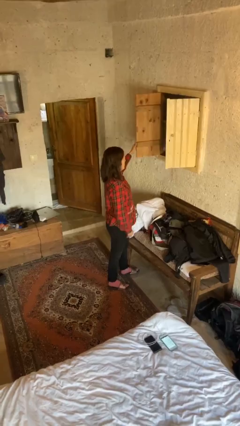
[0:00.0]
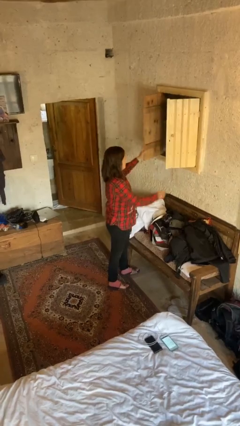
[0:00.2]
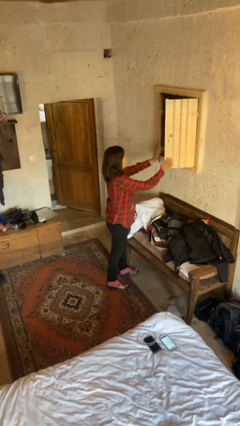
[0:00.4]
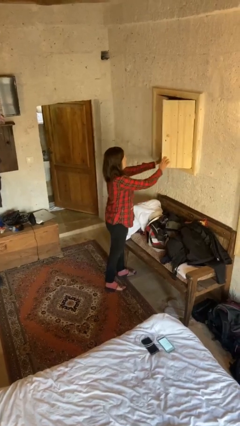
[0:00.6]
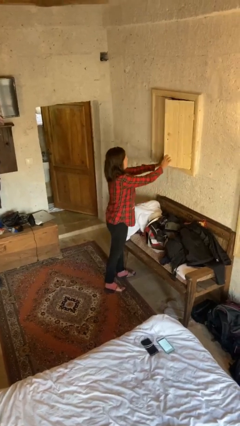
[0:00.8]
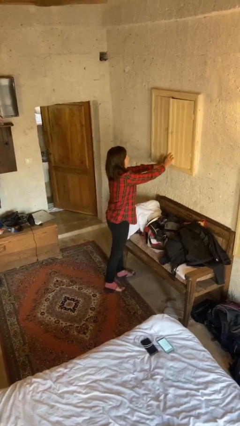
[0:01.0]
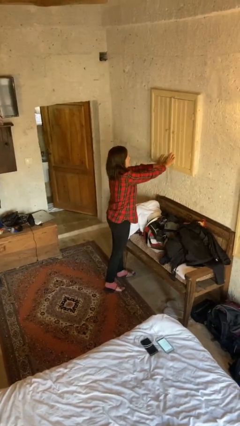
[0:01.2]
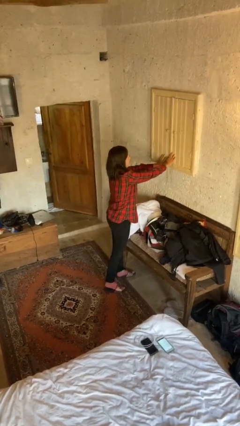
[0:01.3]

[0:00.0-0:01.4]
person closes closet door

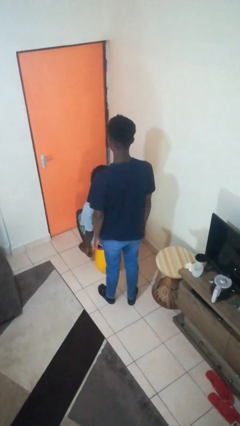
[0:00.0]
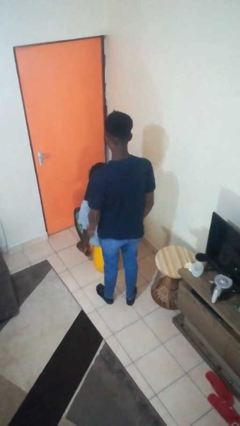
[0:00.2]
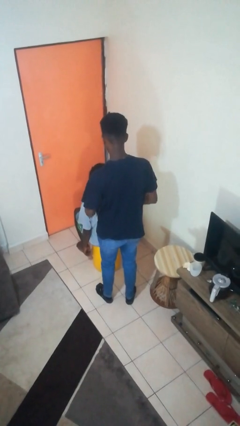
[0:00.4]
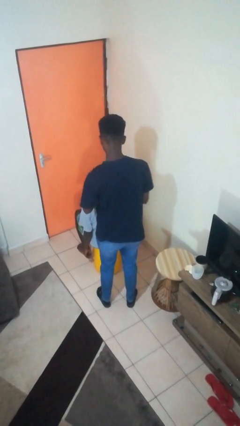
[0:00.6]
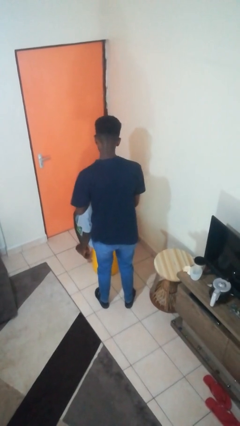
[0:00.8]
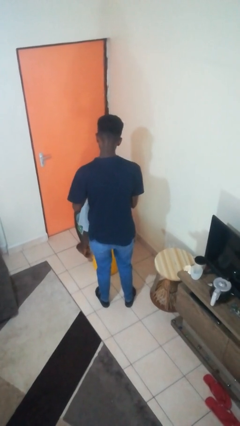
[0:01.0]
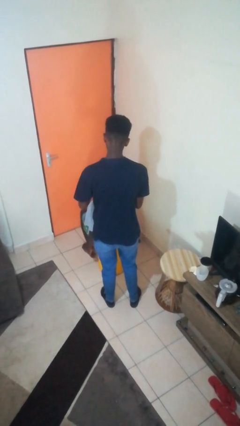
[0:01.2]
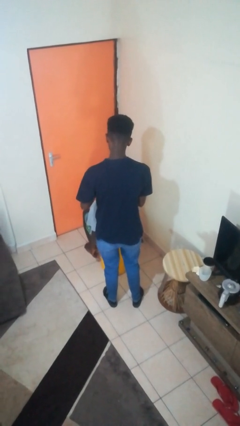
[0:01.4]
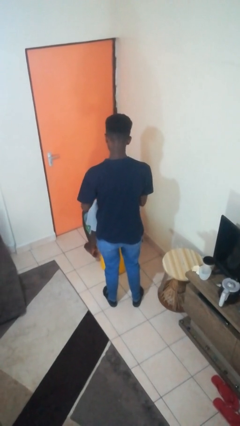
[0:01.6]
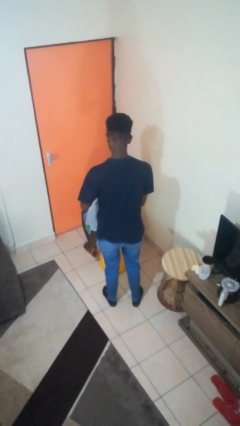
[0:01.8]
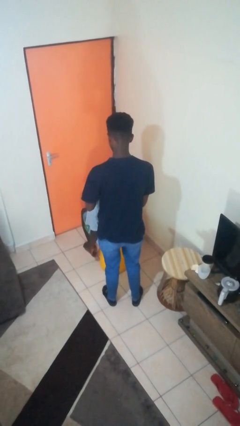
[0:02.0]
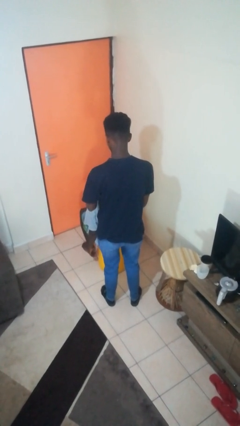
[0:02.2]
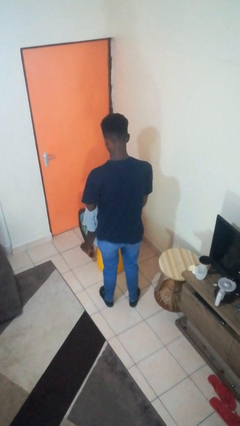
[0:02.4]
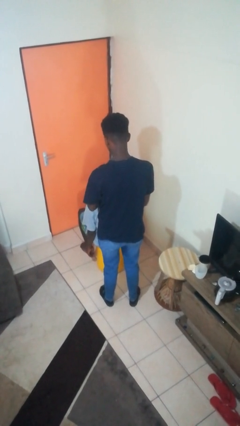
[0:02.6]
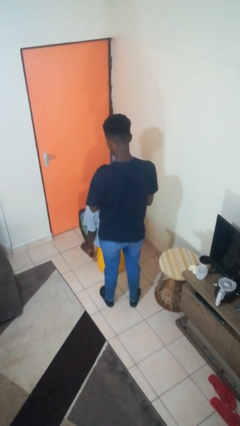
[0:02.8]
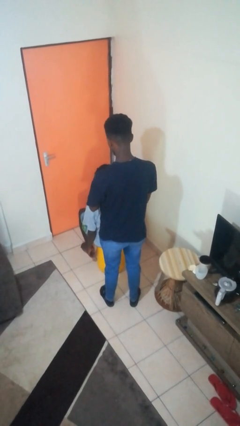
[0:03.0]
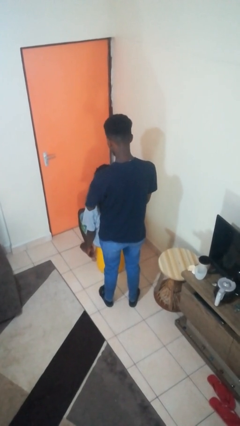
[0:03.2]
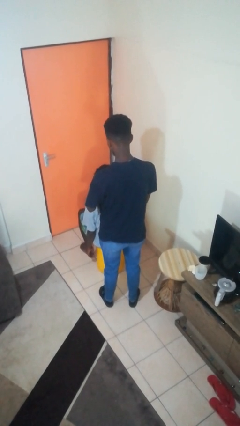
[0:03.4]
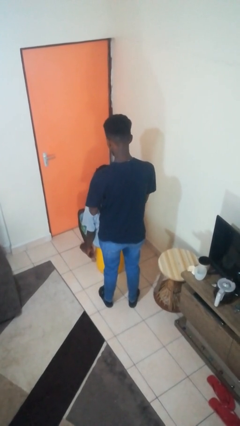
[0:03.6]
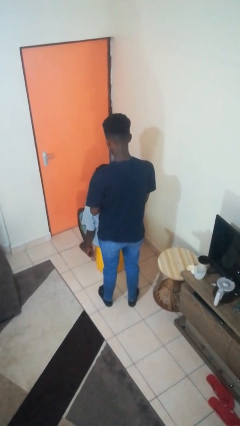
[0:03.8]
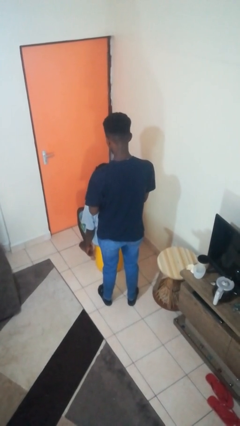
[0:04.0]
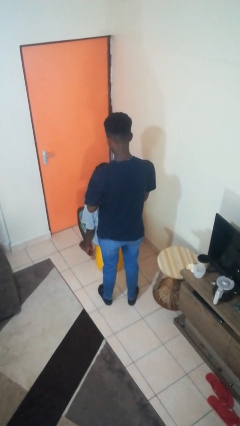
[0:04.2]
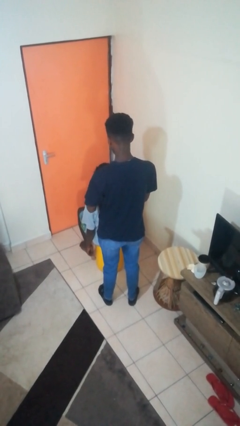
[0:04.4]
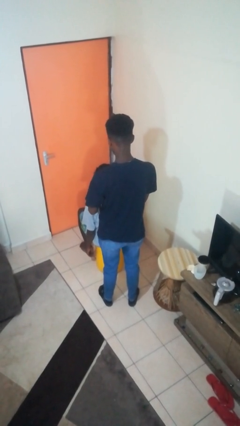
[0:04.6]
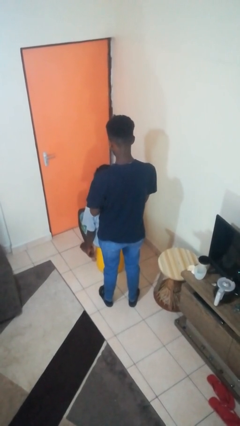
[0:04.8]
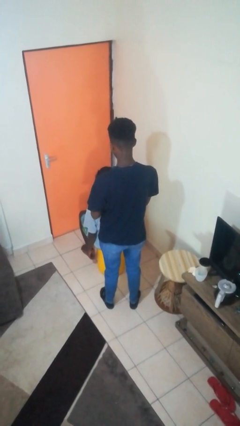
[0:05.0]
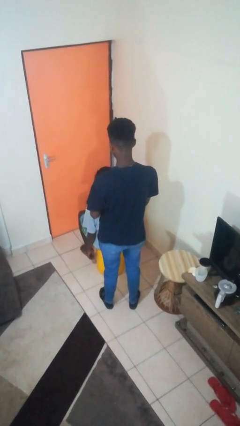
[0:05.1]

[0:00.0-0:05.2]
person braids hair of person

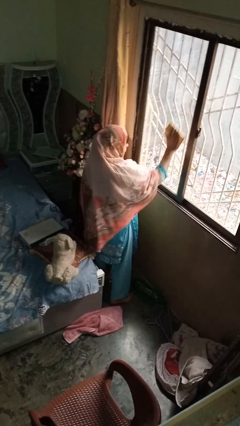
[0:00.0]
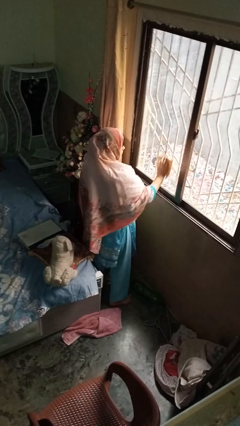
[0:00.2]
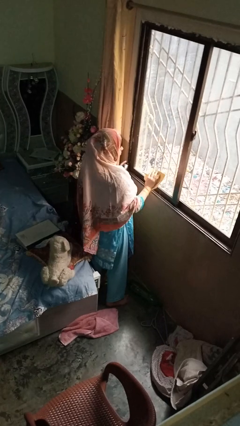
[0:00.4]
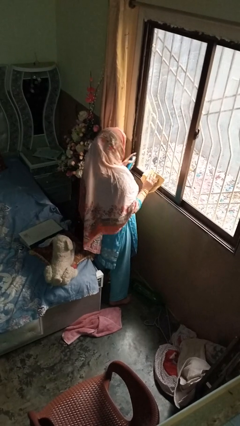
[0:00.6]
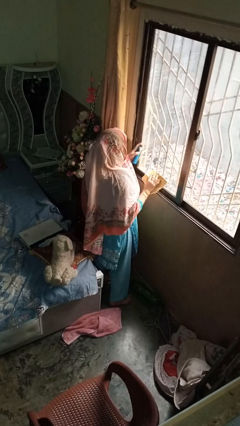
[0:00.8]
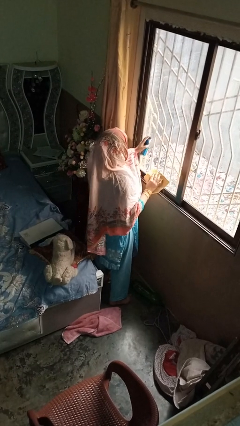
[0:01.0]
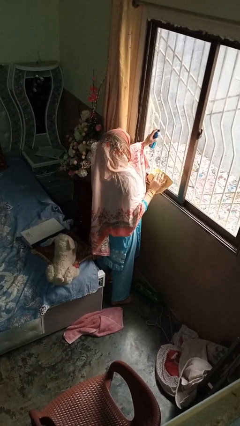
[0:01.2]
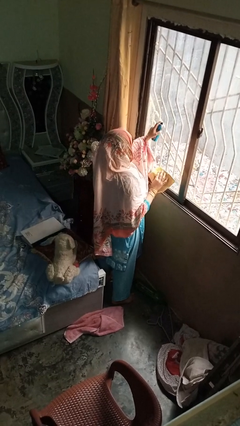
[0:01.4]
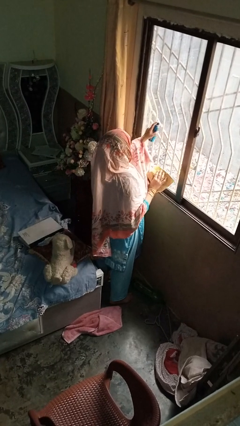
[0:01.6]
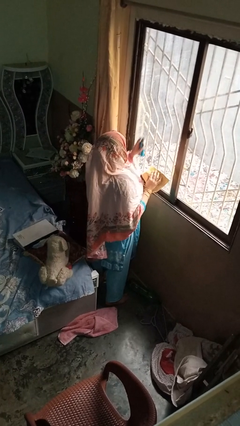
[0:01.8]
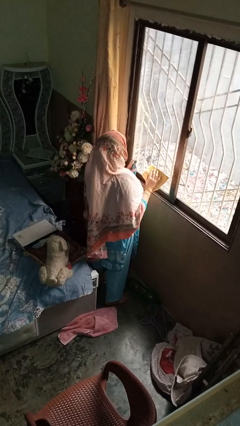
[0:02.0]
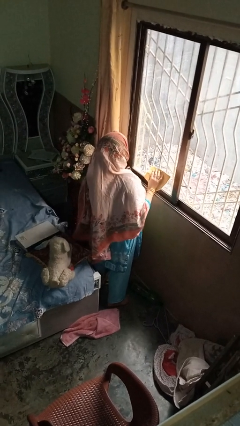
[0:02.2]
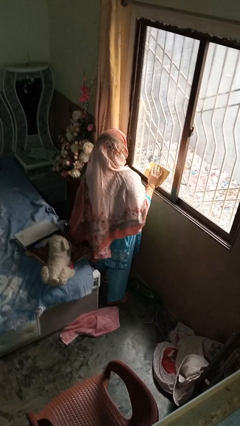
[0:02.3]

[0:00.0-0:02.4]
person sprays from bottle

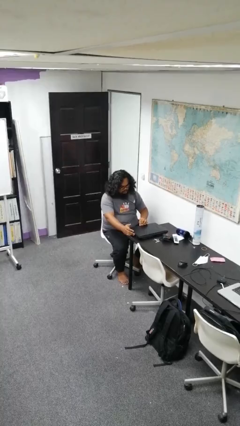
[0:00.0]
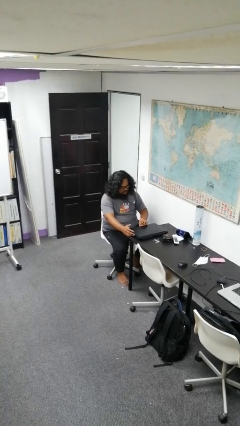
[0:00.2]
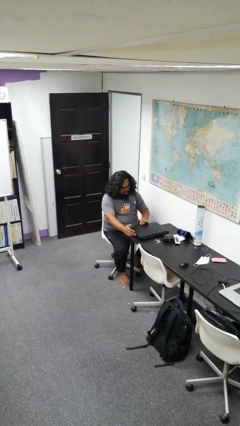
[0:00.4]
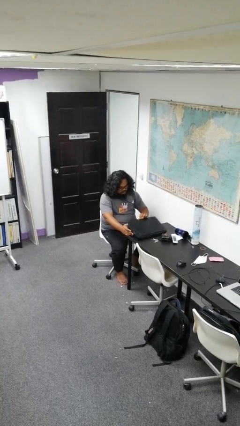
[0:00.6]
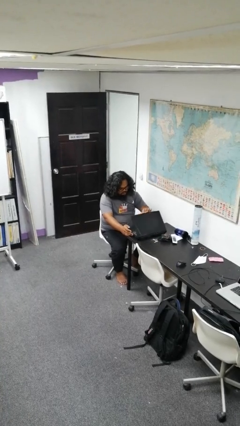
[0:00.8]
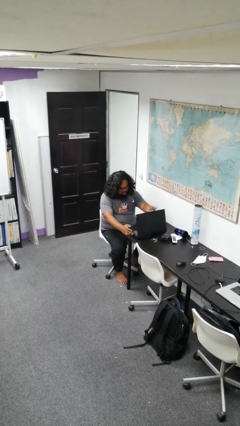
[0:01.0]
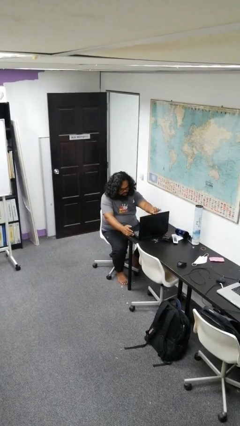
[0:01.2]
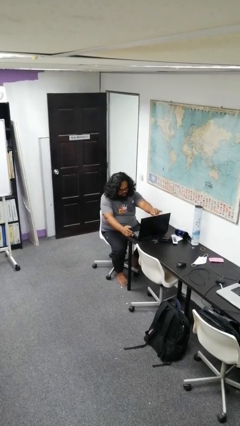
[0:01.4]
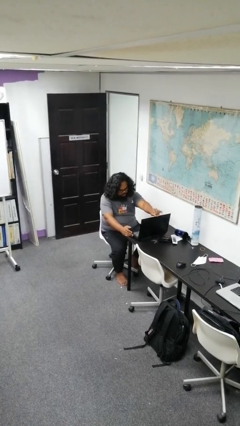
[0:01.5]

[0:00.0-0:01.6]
person opens laptop

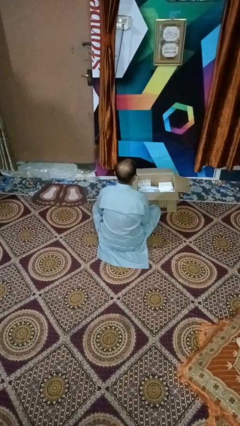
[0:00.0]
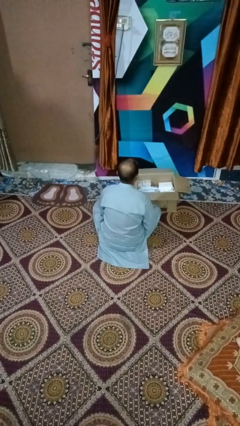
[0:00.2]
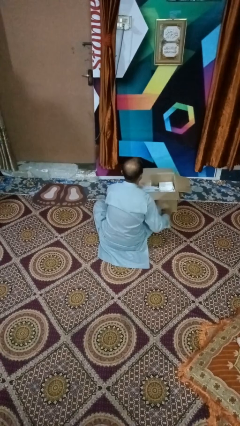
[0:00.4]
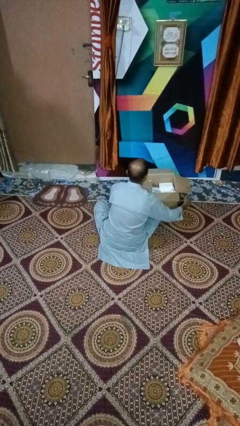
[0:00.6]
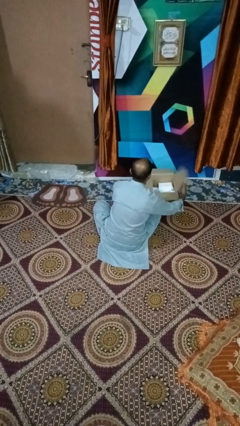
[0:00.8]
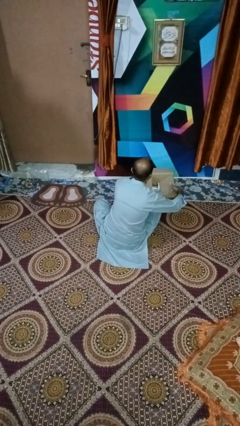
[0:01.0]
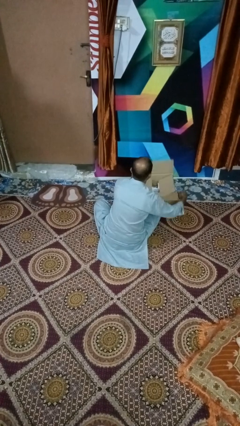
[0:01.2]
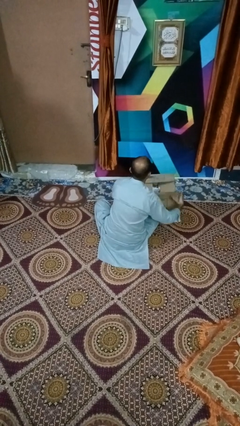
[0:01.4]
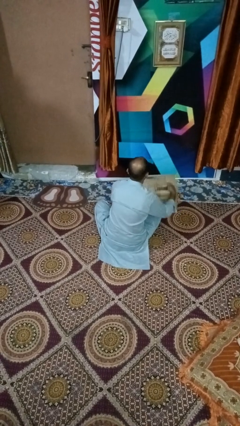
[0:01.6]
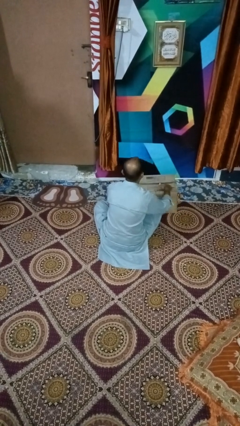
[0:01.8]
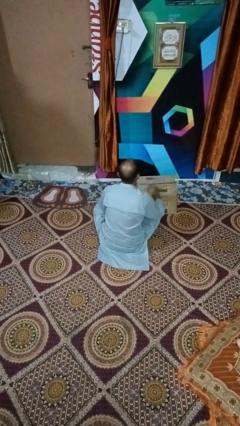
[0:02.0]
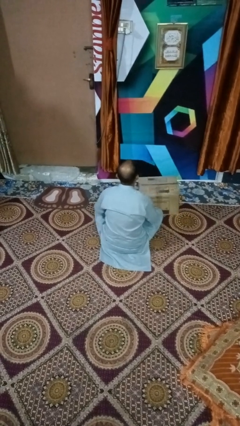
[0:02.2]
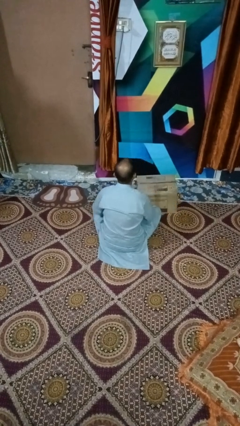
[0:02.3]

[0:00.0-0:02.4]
person closes box

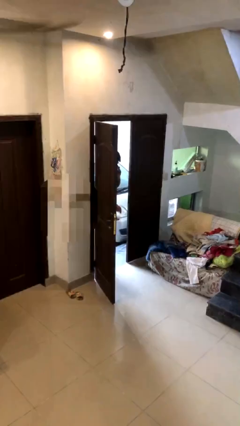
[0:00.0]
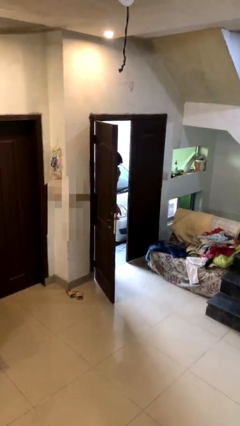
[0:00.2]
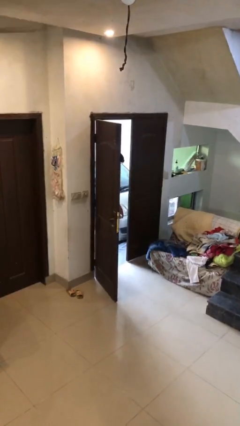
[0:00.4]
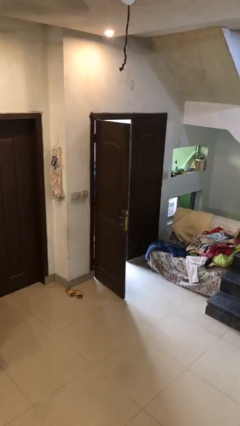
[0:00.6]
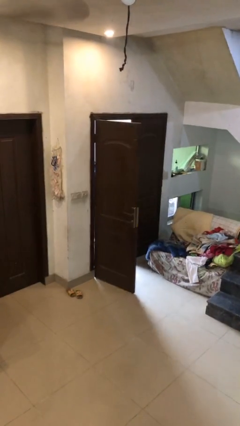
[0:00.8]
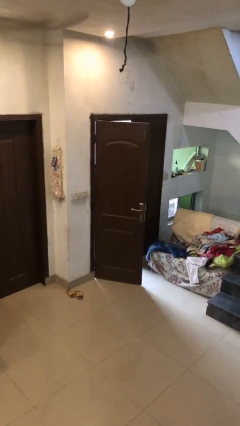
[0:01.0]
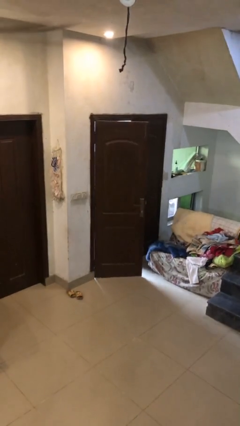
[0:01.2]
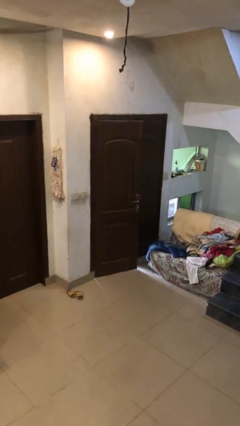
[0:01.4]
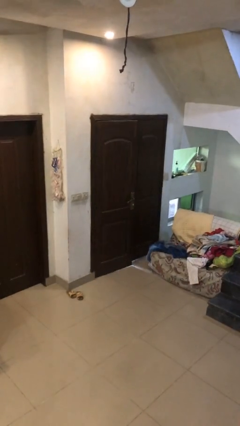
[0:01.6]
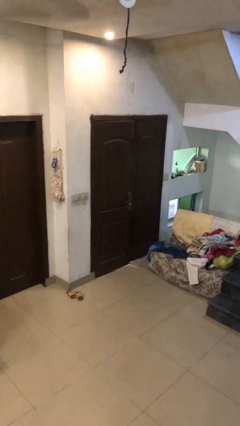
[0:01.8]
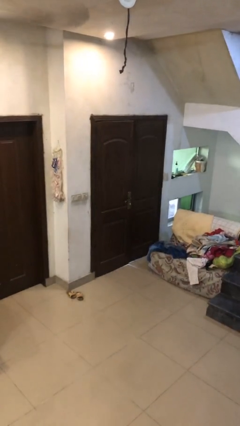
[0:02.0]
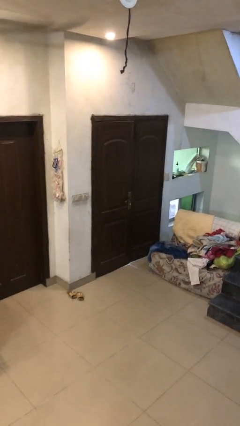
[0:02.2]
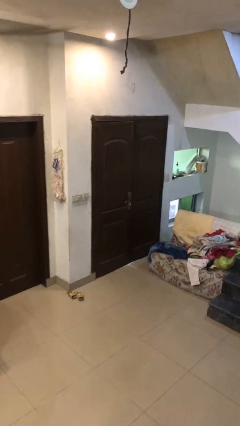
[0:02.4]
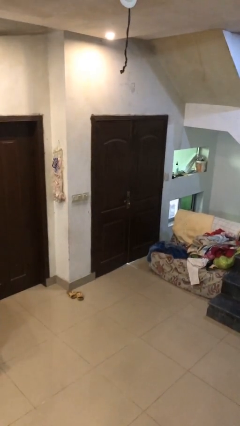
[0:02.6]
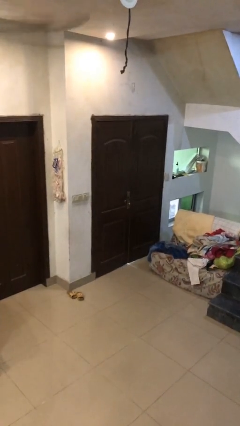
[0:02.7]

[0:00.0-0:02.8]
person closes facility door

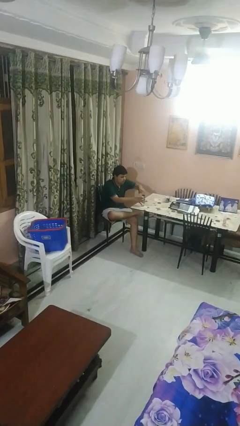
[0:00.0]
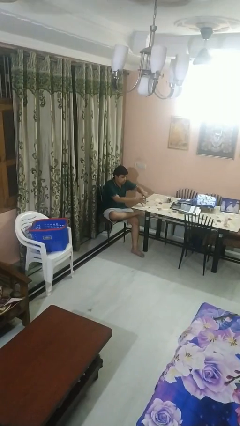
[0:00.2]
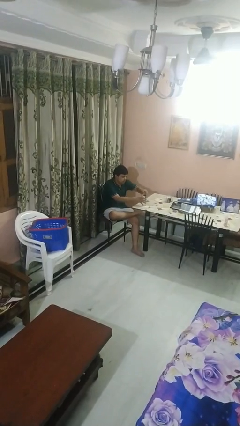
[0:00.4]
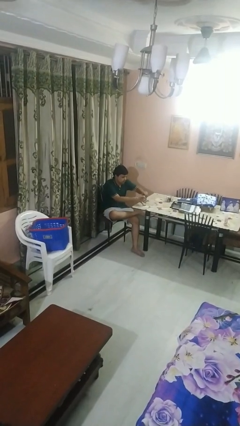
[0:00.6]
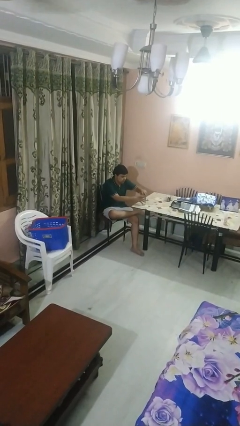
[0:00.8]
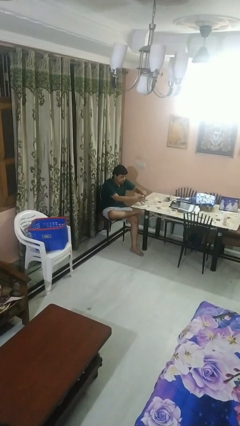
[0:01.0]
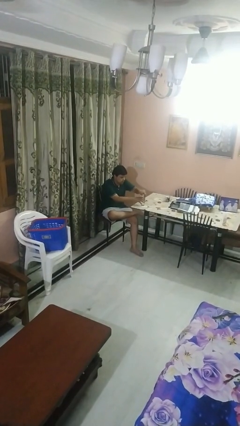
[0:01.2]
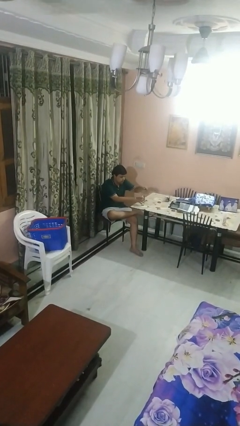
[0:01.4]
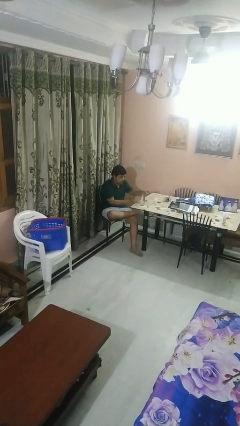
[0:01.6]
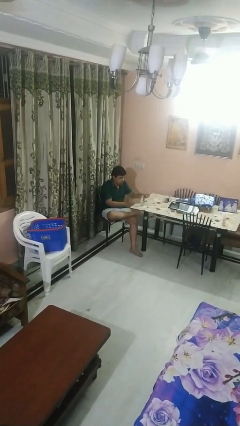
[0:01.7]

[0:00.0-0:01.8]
person unscrews lid from bottle
